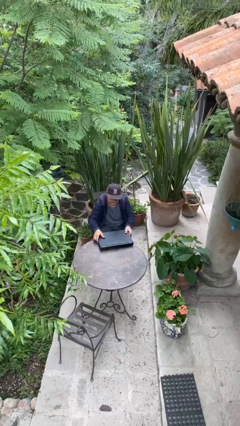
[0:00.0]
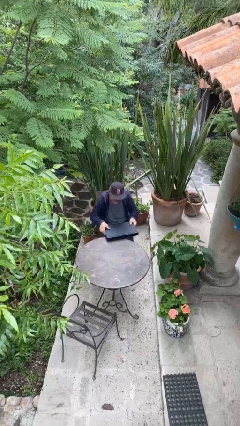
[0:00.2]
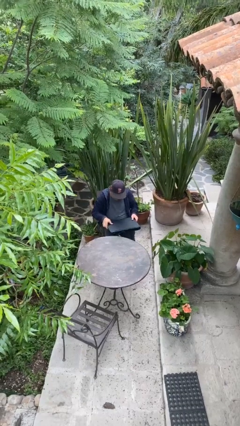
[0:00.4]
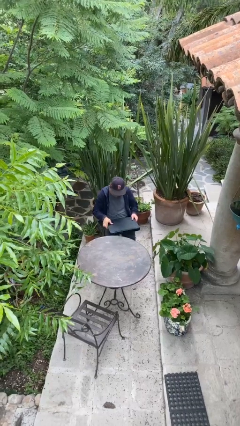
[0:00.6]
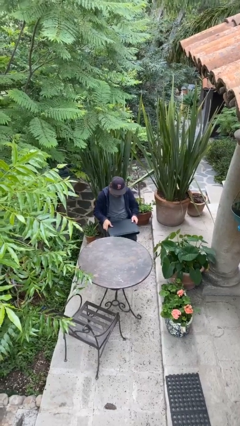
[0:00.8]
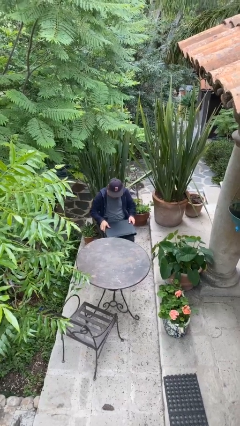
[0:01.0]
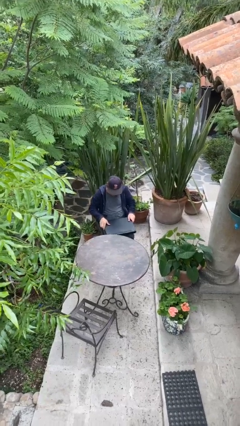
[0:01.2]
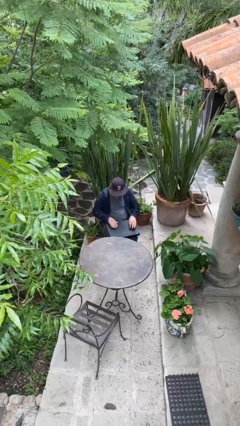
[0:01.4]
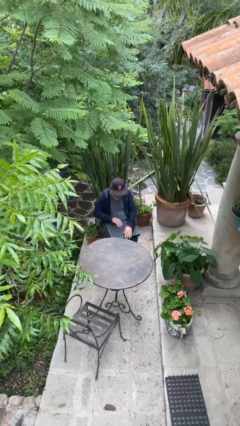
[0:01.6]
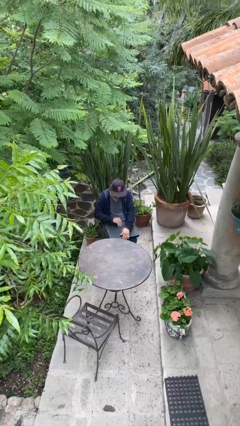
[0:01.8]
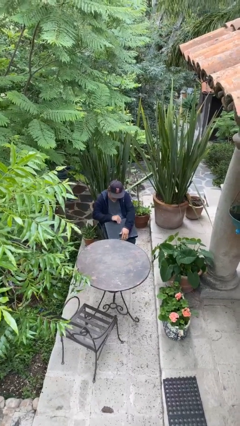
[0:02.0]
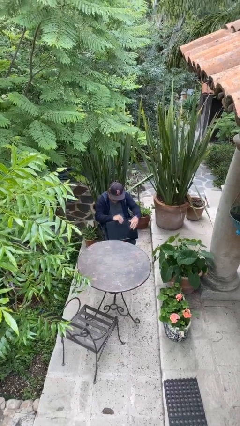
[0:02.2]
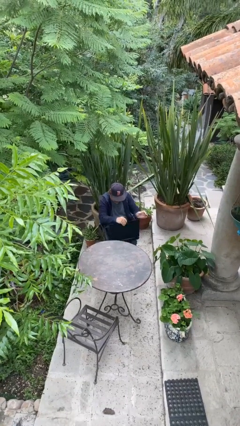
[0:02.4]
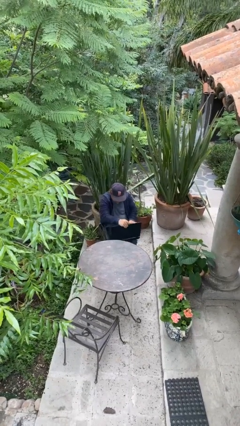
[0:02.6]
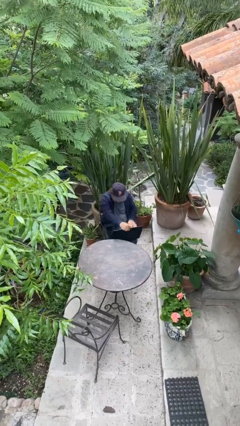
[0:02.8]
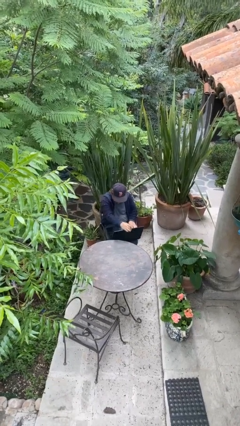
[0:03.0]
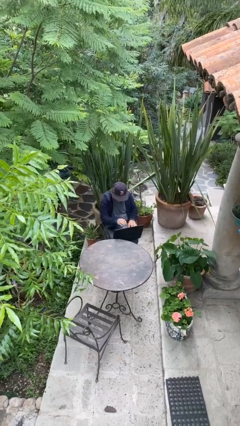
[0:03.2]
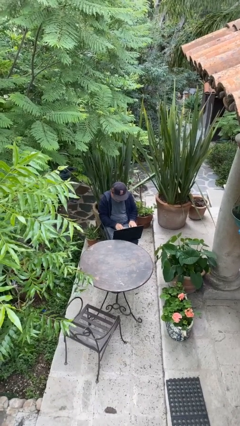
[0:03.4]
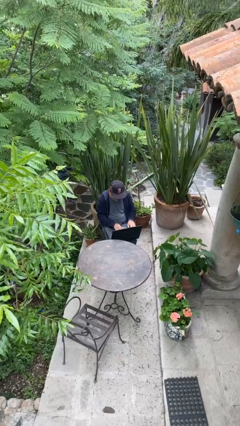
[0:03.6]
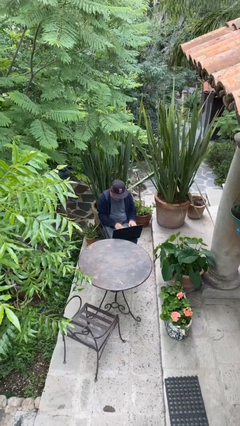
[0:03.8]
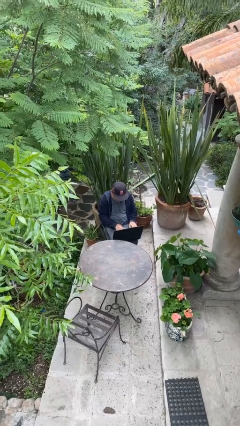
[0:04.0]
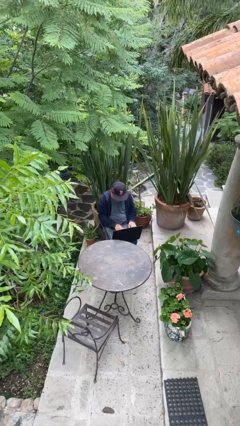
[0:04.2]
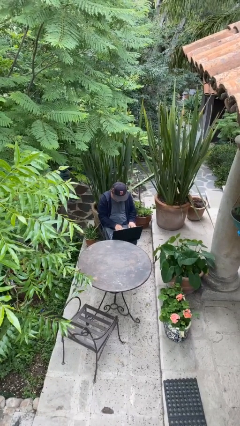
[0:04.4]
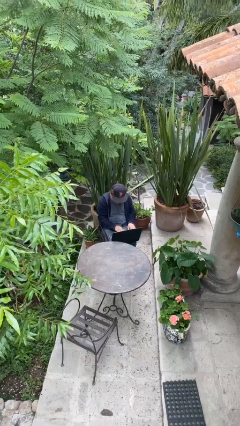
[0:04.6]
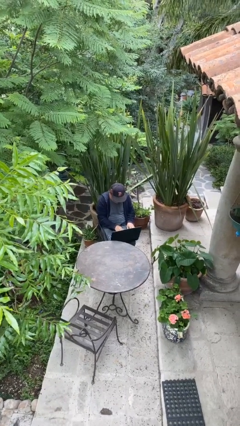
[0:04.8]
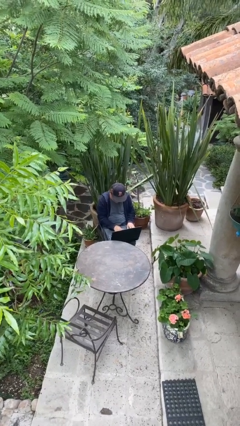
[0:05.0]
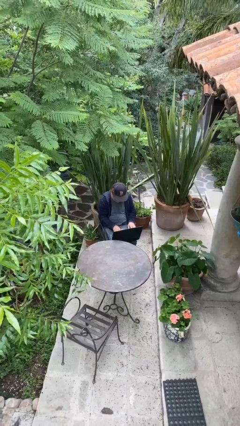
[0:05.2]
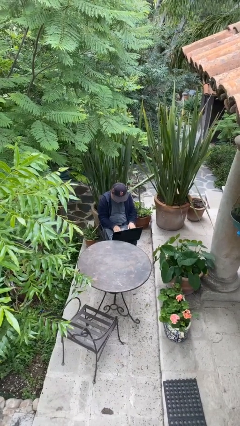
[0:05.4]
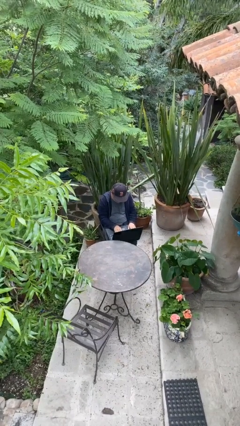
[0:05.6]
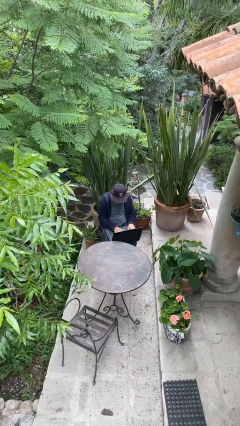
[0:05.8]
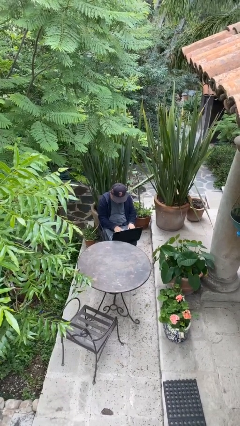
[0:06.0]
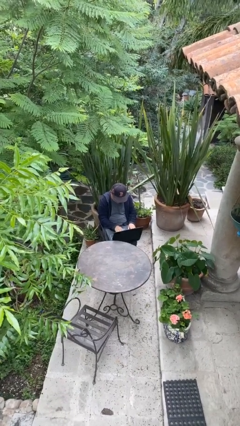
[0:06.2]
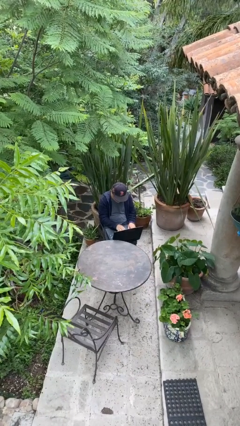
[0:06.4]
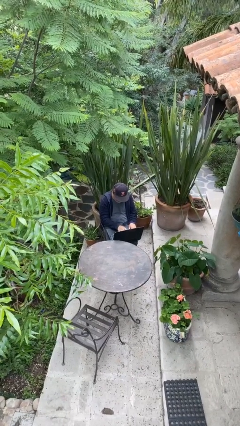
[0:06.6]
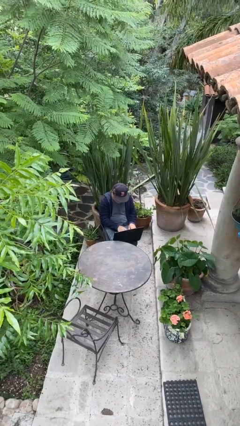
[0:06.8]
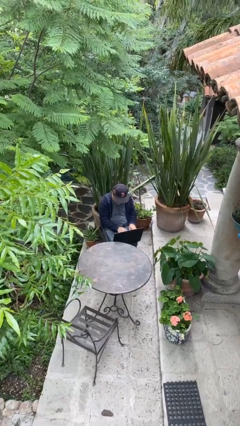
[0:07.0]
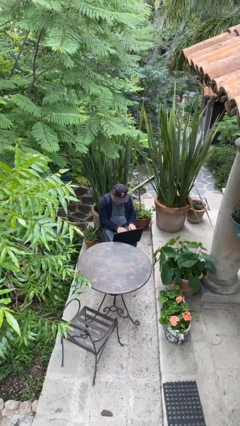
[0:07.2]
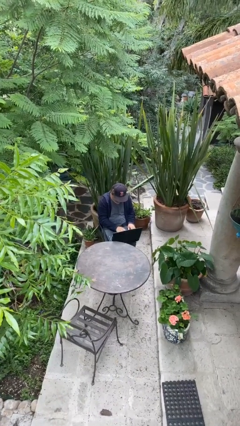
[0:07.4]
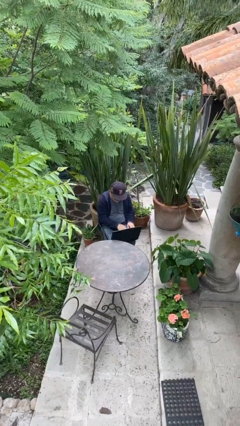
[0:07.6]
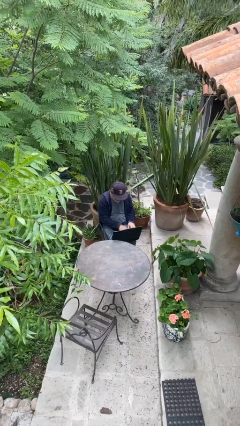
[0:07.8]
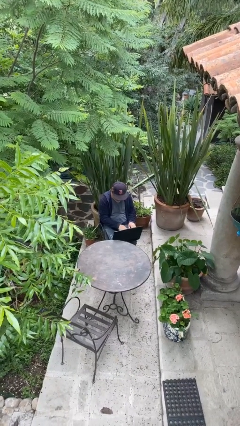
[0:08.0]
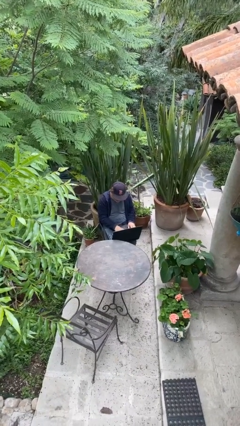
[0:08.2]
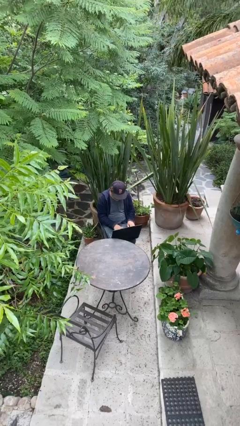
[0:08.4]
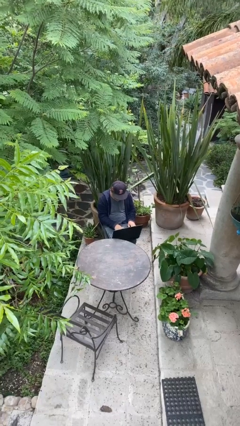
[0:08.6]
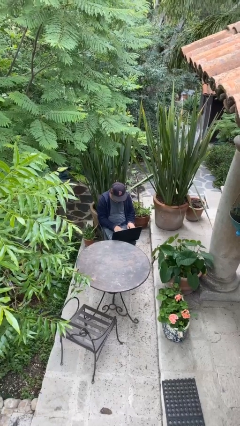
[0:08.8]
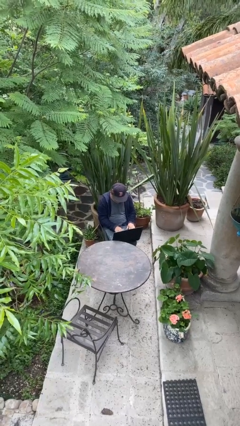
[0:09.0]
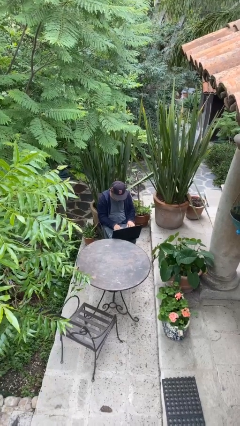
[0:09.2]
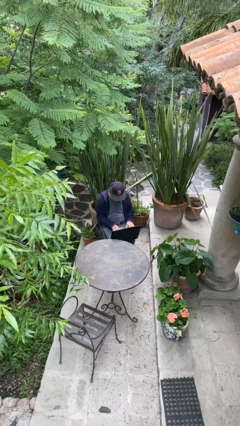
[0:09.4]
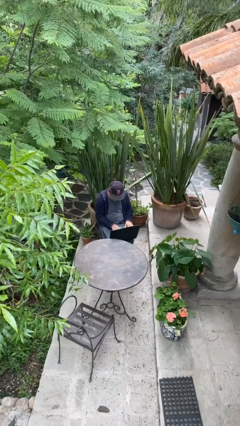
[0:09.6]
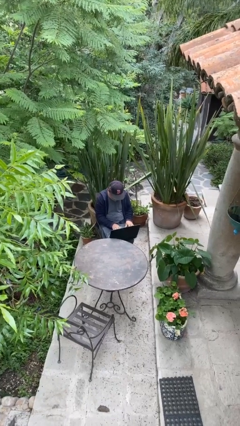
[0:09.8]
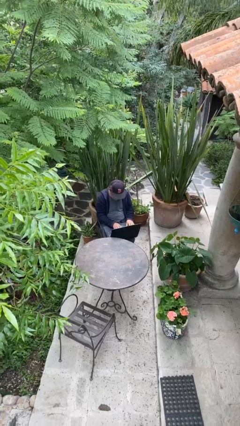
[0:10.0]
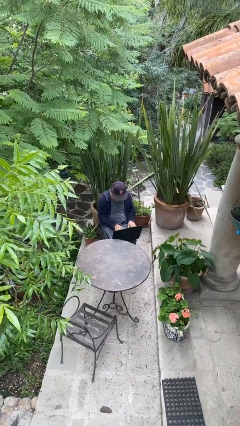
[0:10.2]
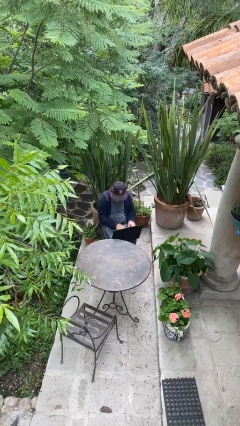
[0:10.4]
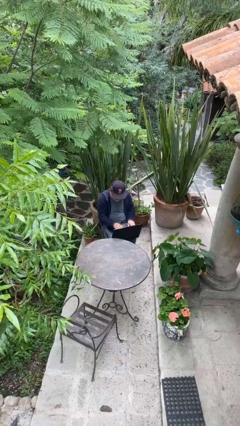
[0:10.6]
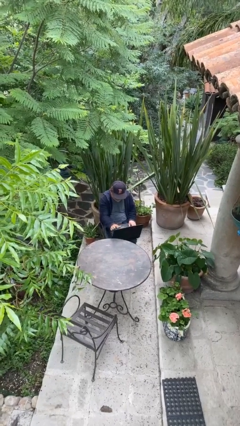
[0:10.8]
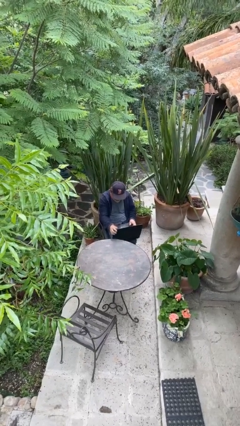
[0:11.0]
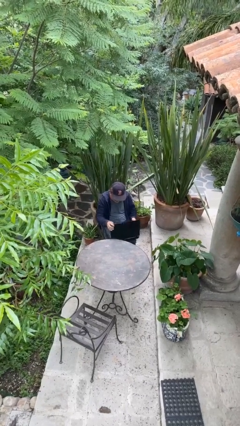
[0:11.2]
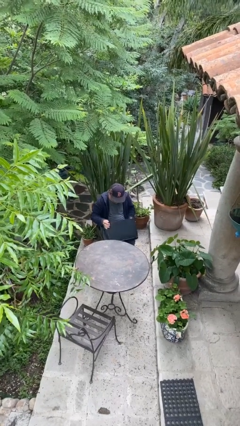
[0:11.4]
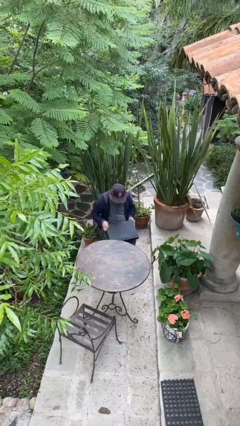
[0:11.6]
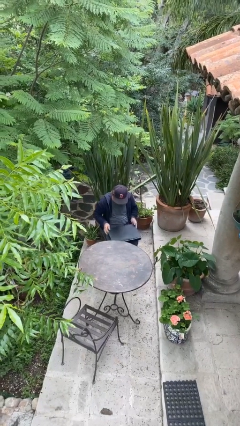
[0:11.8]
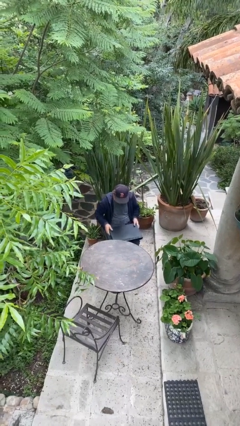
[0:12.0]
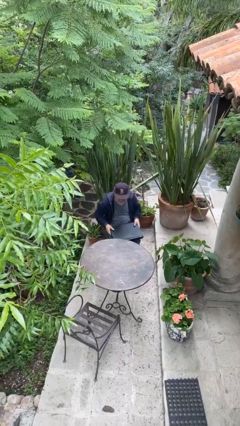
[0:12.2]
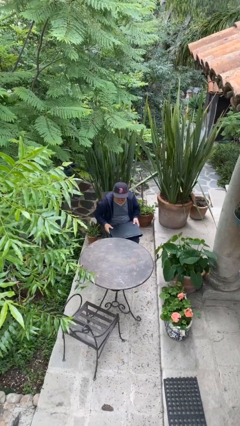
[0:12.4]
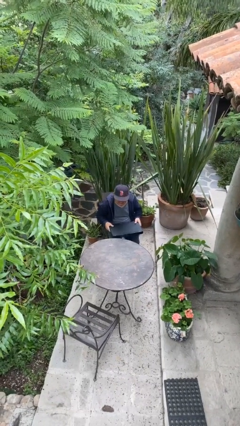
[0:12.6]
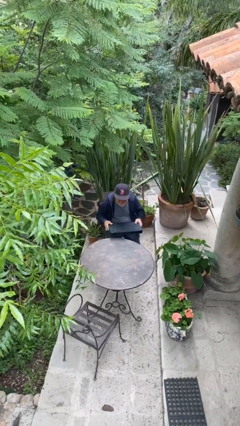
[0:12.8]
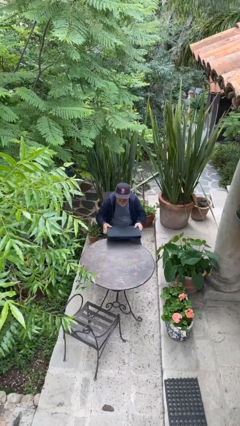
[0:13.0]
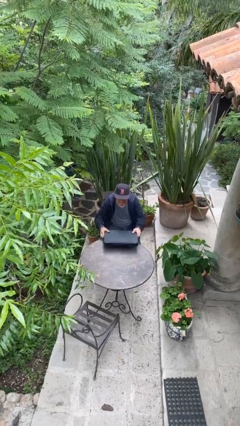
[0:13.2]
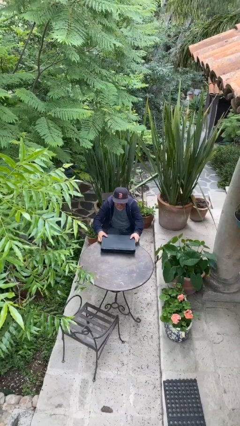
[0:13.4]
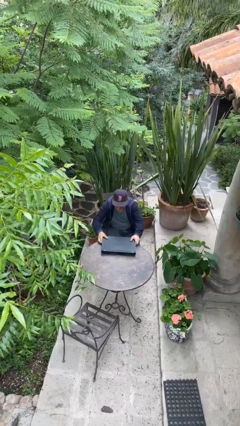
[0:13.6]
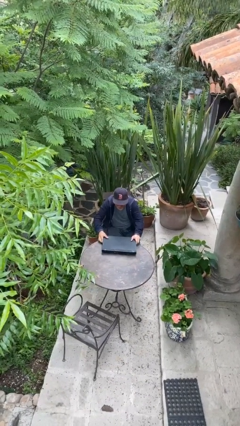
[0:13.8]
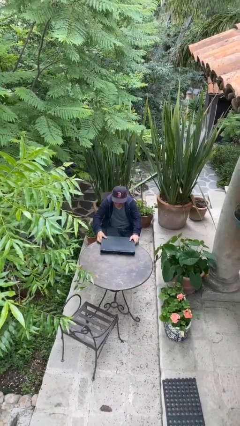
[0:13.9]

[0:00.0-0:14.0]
person interacts with laptop

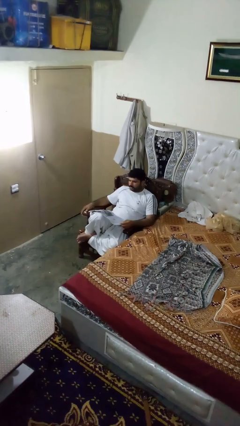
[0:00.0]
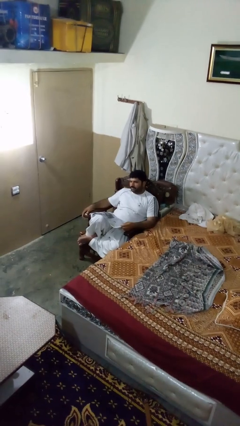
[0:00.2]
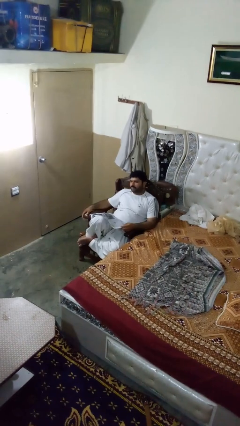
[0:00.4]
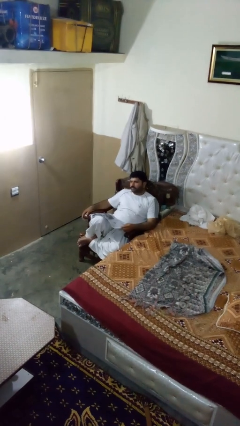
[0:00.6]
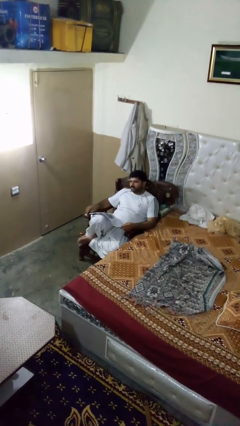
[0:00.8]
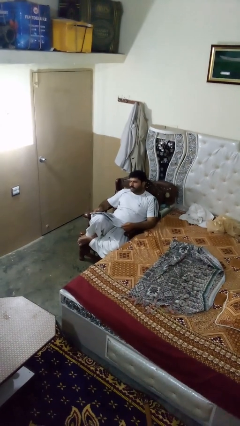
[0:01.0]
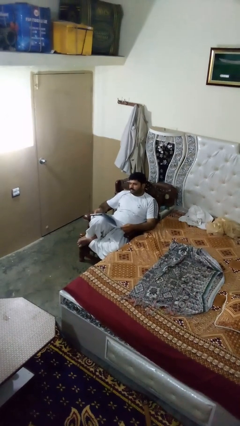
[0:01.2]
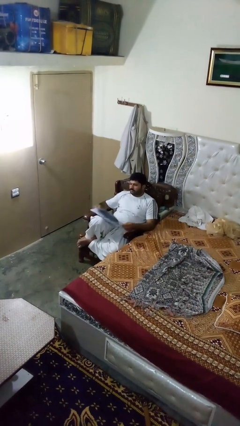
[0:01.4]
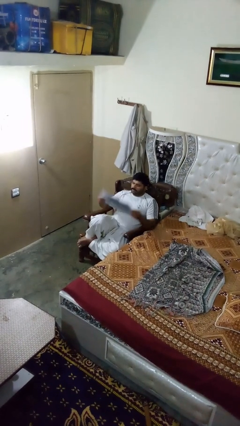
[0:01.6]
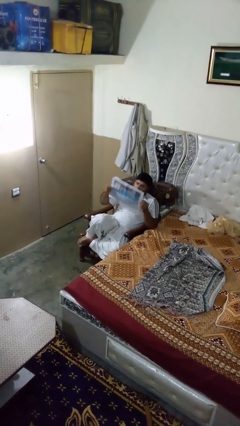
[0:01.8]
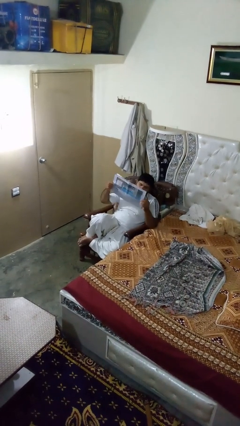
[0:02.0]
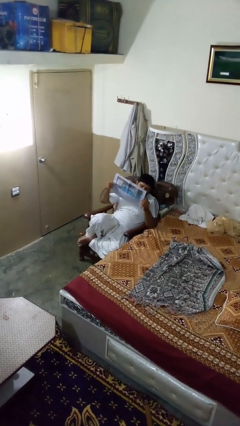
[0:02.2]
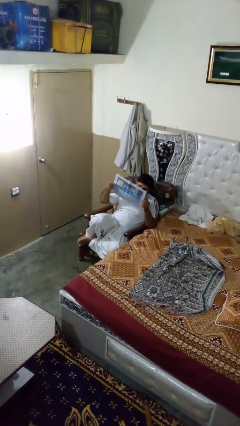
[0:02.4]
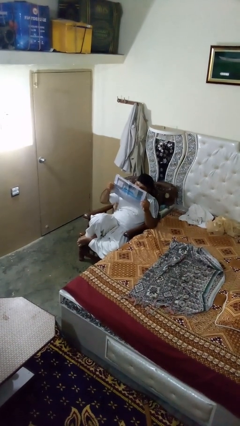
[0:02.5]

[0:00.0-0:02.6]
person reads newspaper

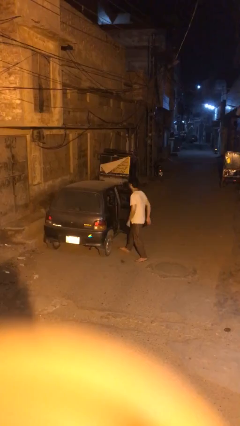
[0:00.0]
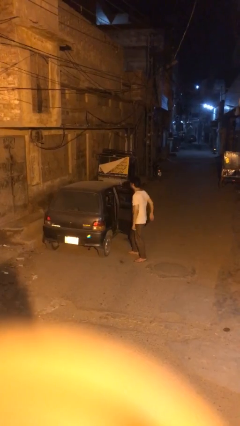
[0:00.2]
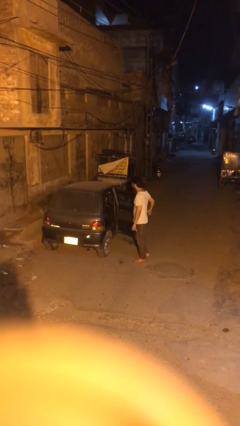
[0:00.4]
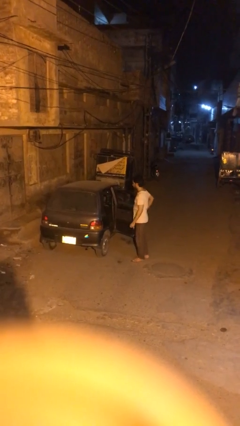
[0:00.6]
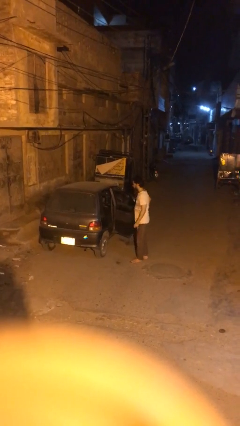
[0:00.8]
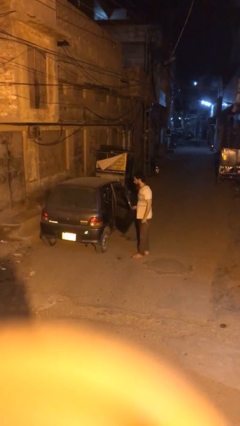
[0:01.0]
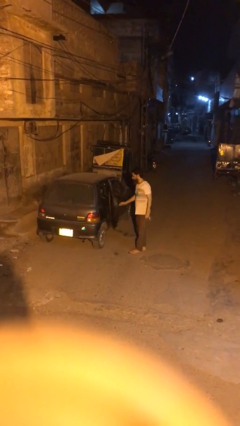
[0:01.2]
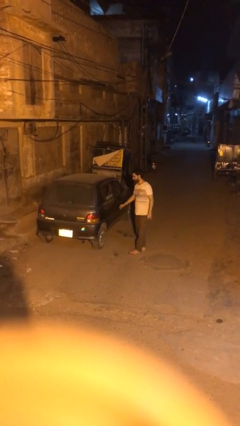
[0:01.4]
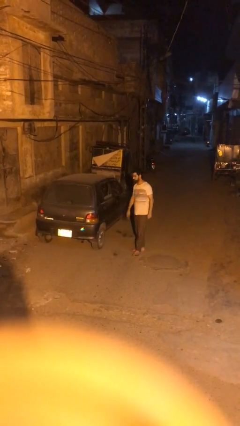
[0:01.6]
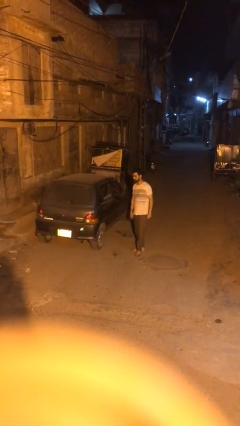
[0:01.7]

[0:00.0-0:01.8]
person closes car door
